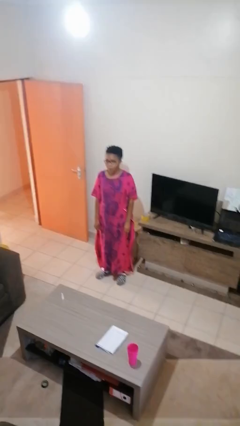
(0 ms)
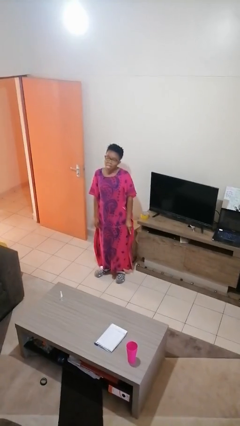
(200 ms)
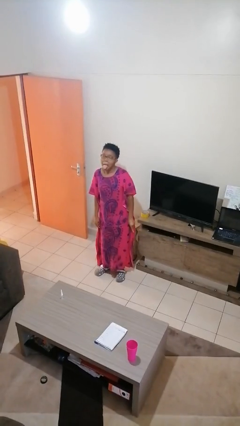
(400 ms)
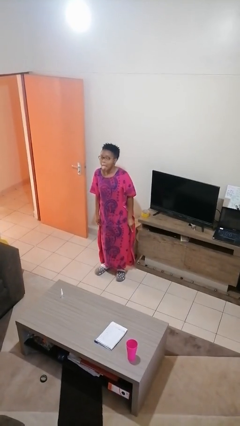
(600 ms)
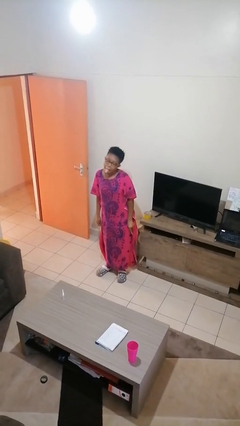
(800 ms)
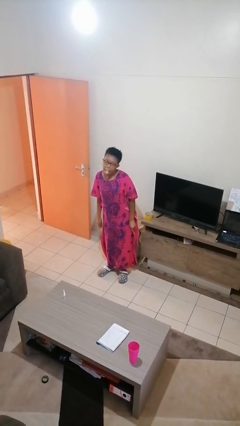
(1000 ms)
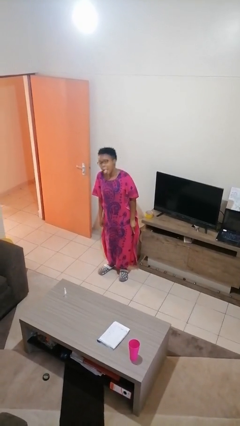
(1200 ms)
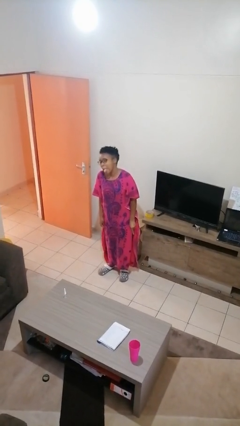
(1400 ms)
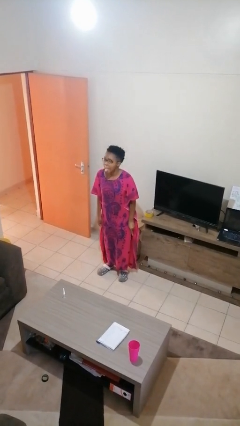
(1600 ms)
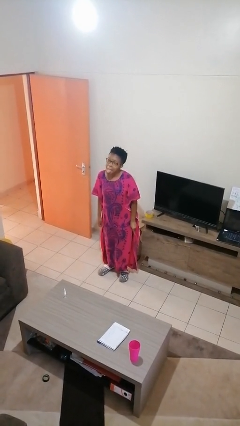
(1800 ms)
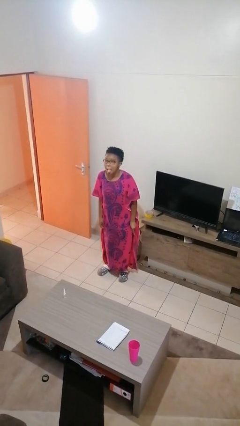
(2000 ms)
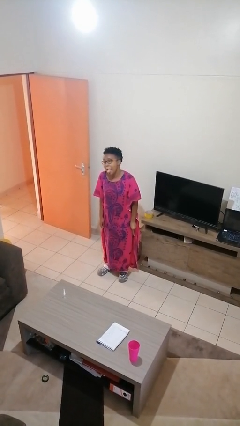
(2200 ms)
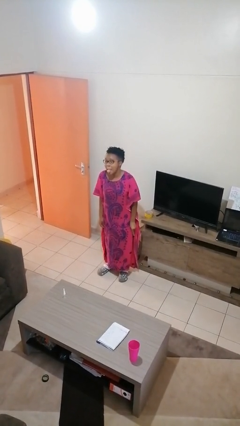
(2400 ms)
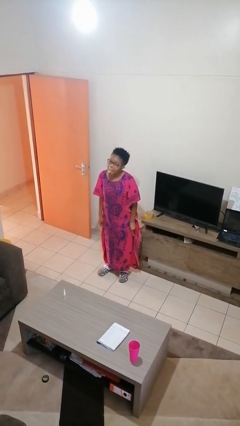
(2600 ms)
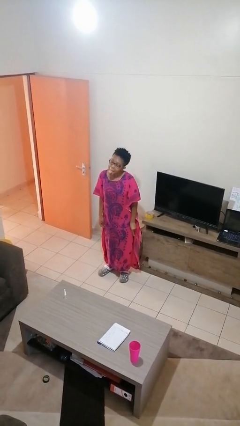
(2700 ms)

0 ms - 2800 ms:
person sticks out tongue

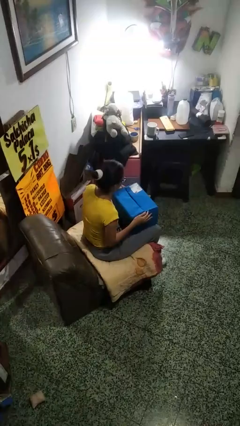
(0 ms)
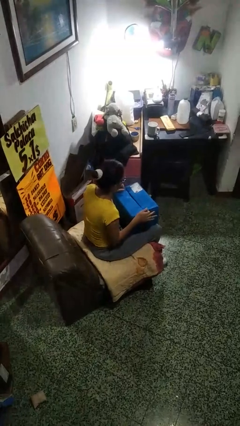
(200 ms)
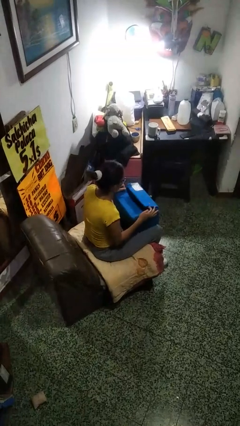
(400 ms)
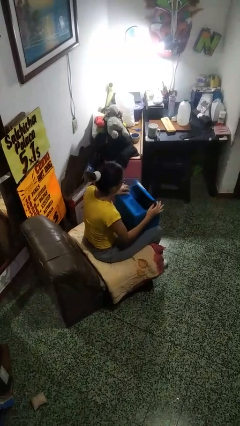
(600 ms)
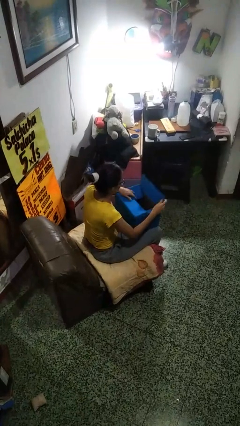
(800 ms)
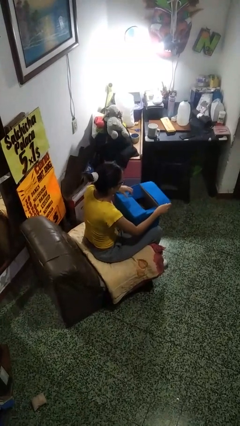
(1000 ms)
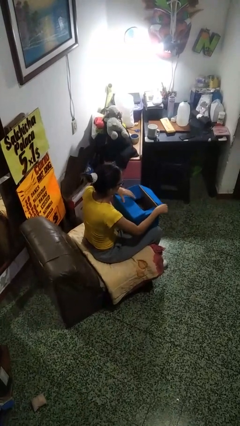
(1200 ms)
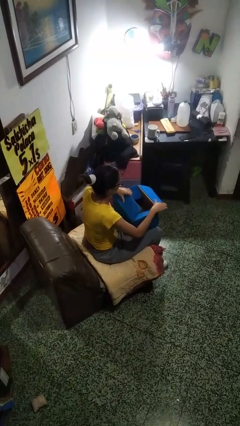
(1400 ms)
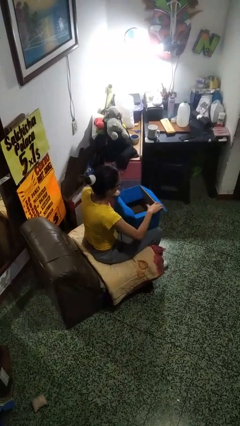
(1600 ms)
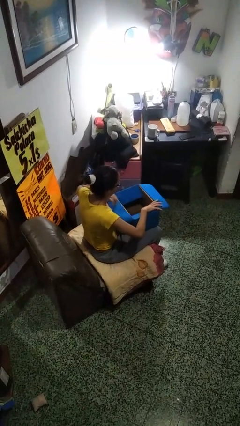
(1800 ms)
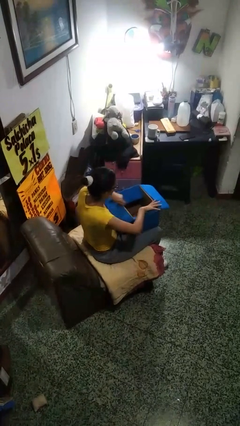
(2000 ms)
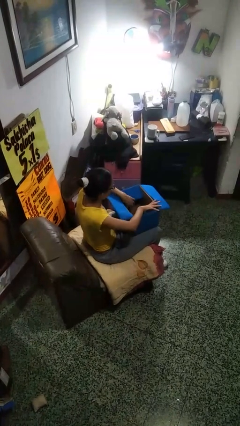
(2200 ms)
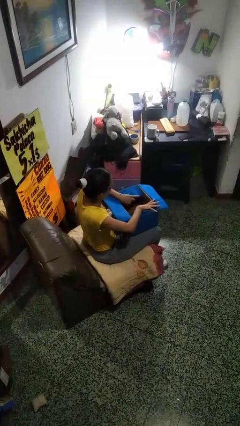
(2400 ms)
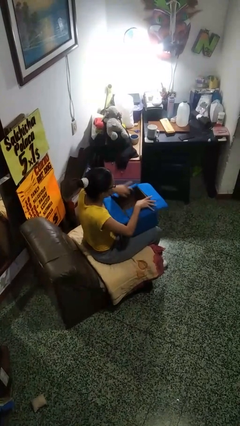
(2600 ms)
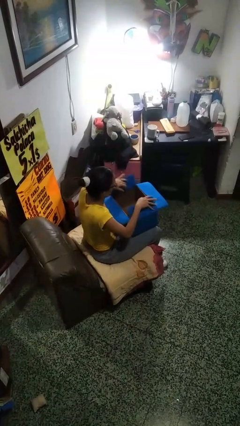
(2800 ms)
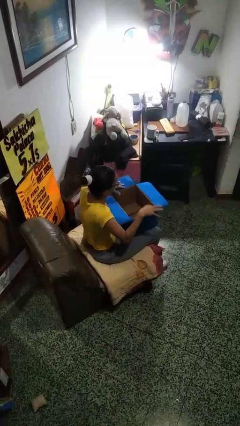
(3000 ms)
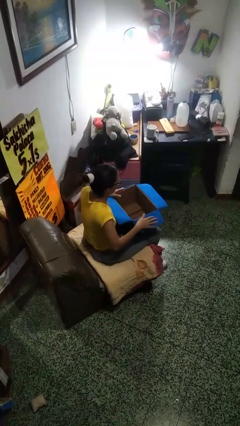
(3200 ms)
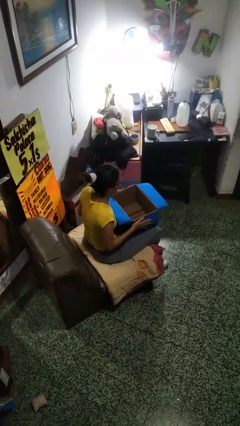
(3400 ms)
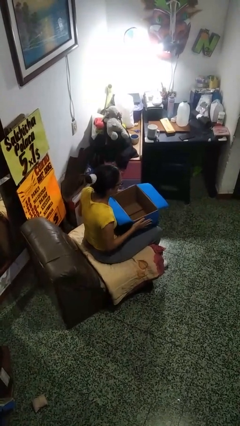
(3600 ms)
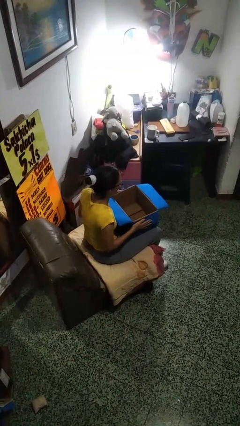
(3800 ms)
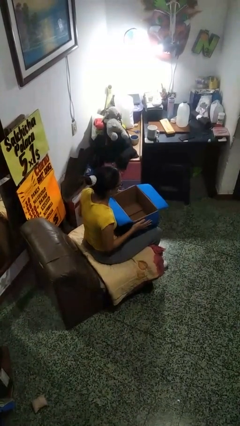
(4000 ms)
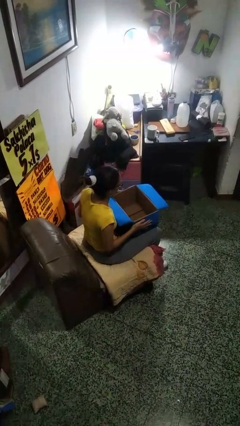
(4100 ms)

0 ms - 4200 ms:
person opens box

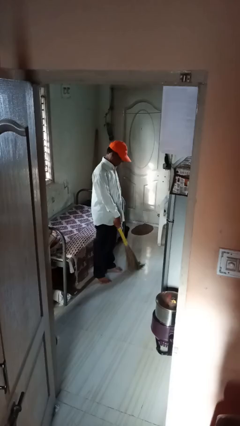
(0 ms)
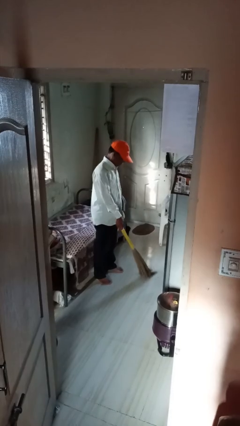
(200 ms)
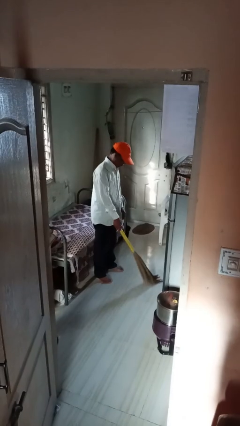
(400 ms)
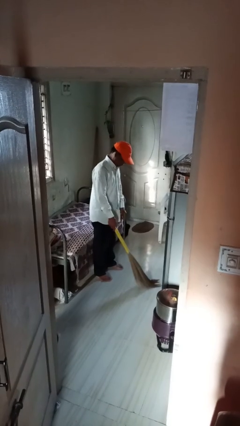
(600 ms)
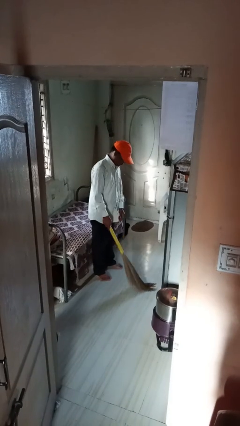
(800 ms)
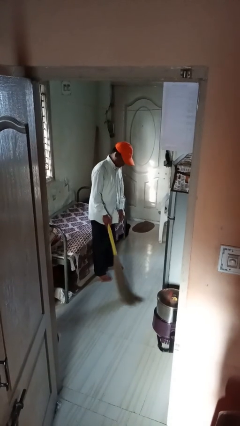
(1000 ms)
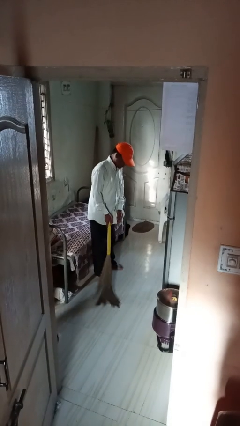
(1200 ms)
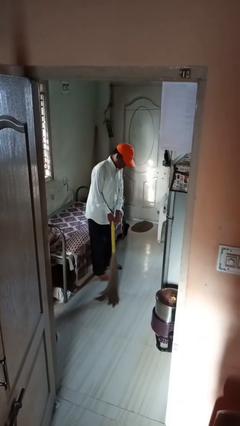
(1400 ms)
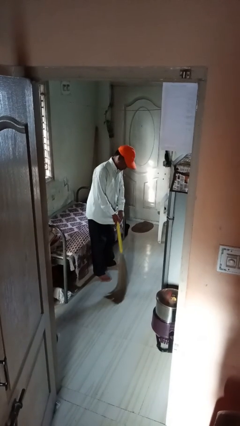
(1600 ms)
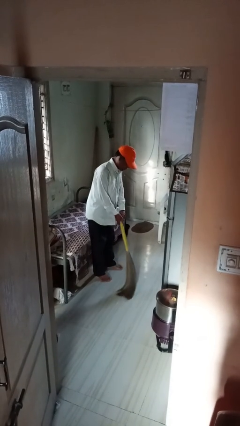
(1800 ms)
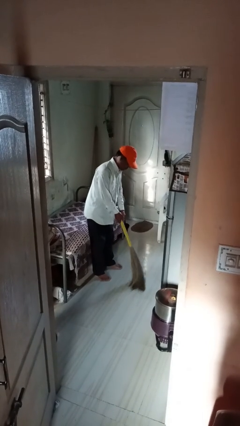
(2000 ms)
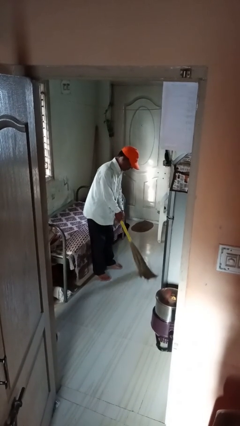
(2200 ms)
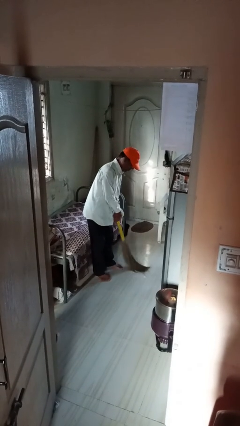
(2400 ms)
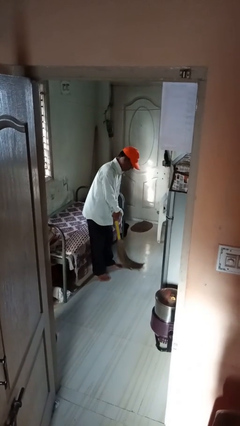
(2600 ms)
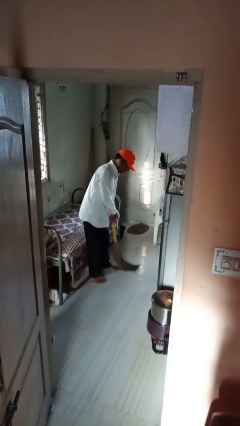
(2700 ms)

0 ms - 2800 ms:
person sweeps floor

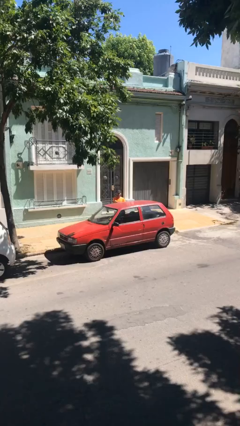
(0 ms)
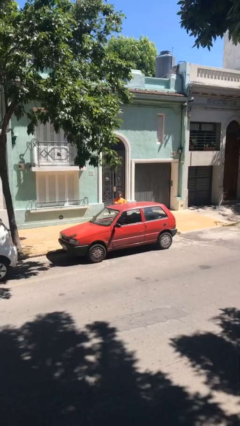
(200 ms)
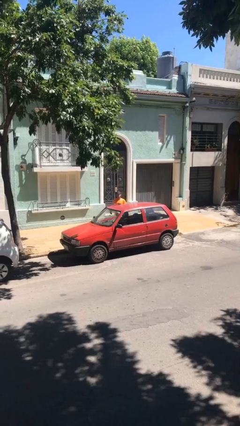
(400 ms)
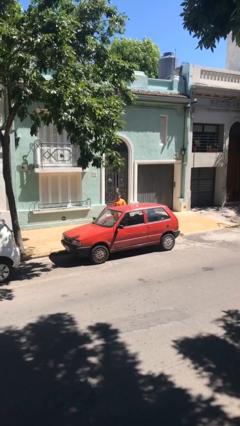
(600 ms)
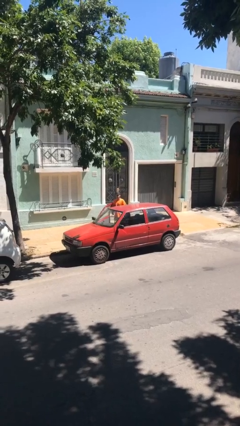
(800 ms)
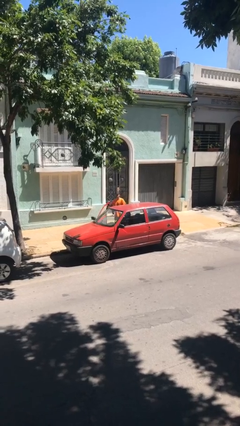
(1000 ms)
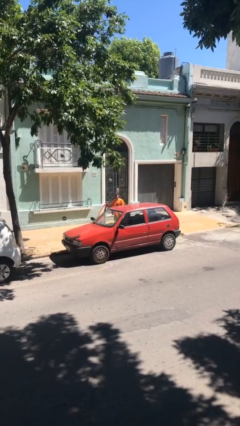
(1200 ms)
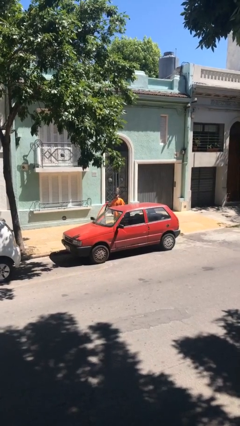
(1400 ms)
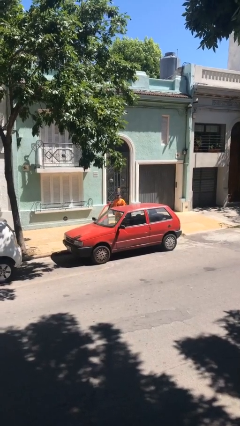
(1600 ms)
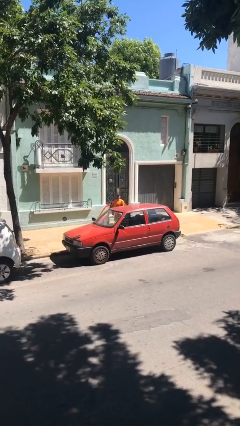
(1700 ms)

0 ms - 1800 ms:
person opens car door

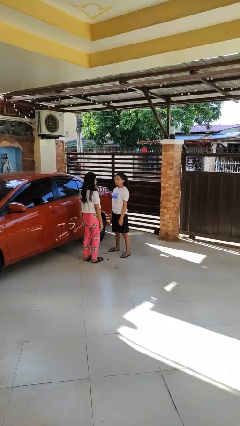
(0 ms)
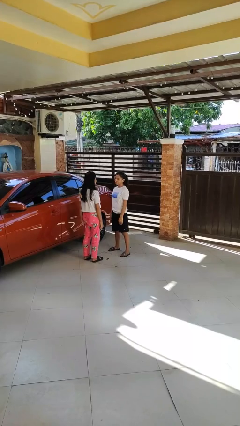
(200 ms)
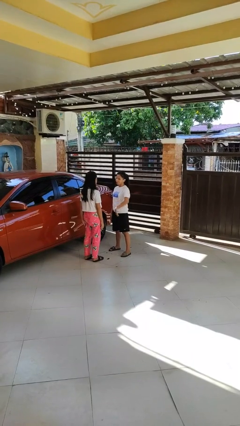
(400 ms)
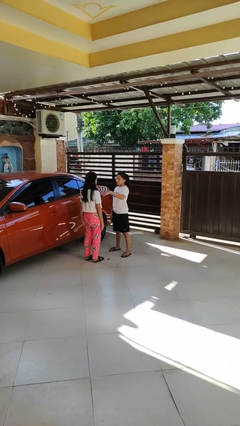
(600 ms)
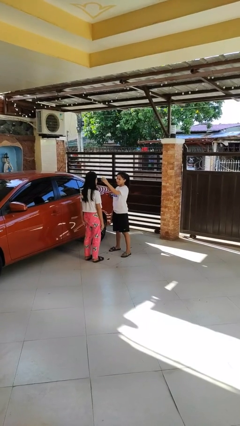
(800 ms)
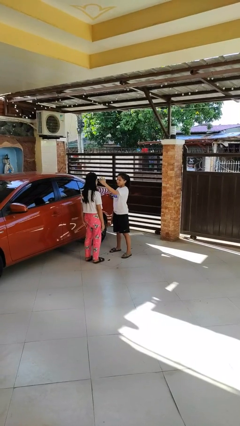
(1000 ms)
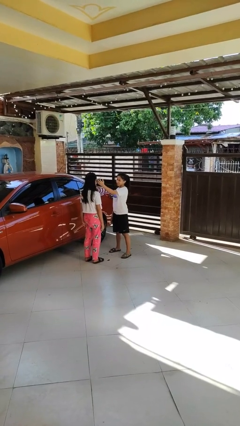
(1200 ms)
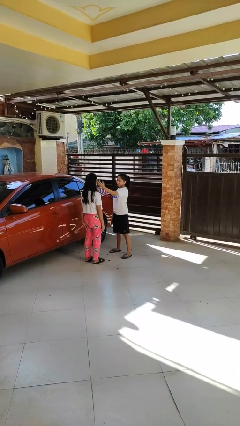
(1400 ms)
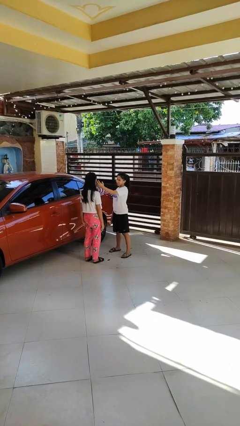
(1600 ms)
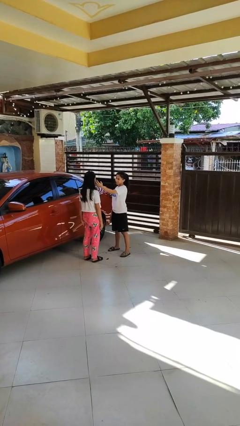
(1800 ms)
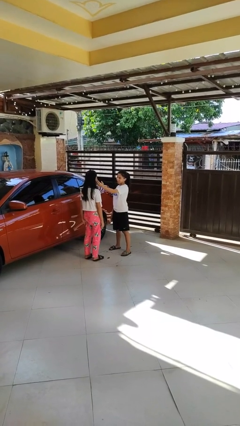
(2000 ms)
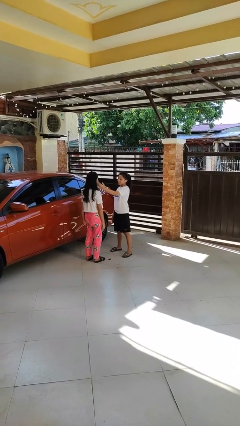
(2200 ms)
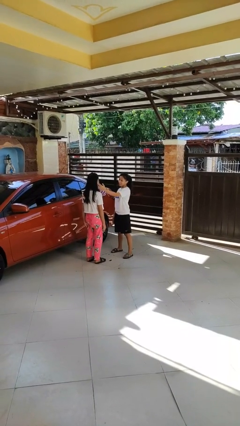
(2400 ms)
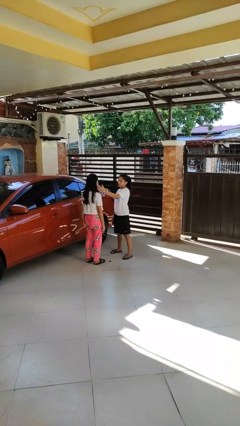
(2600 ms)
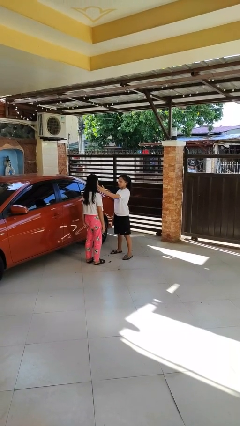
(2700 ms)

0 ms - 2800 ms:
person touches face of person

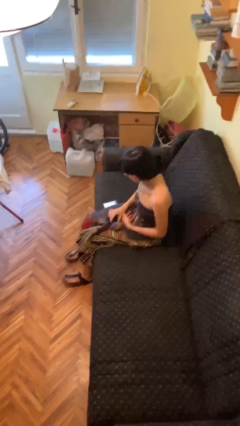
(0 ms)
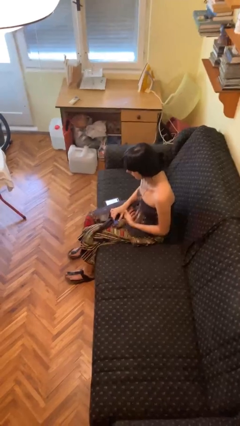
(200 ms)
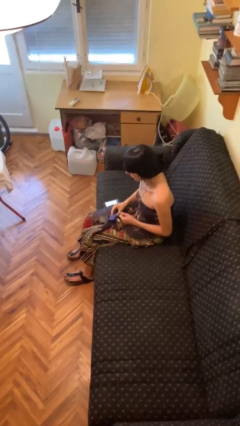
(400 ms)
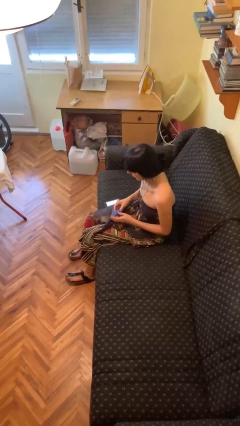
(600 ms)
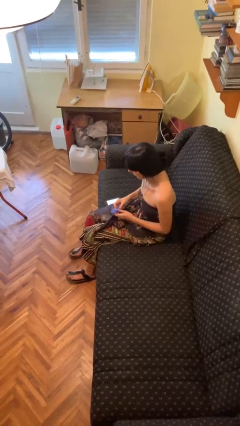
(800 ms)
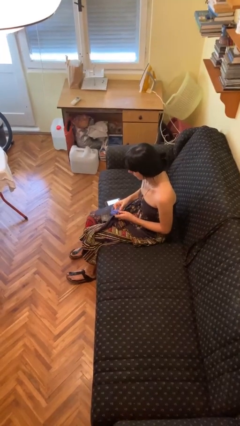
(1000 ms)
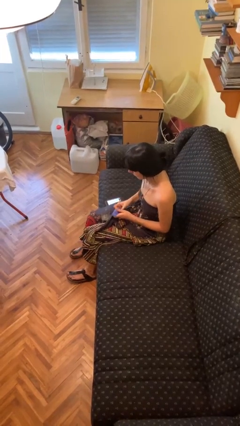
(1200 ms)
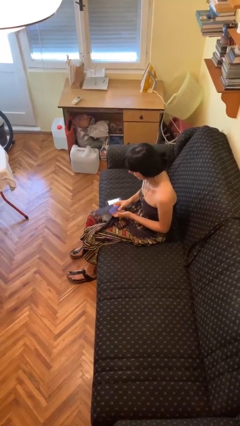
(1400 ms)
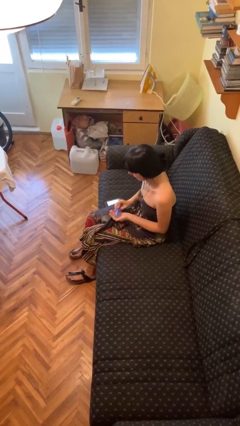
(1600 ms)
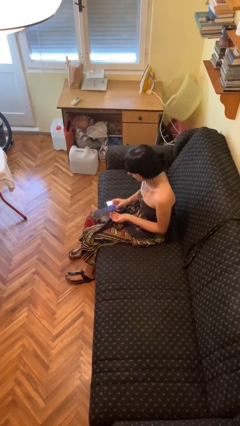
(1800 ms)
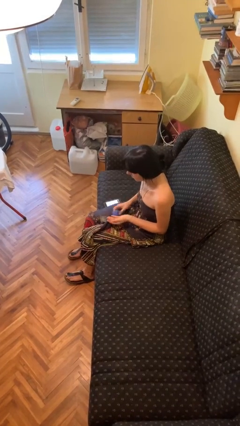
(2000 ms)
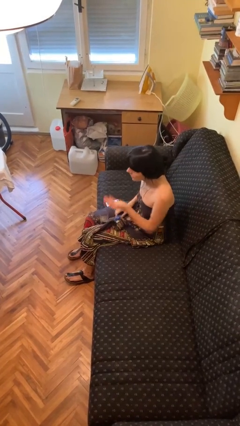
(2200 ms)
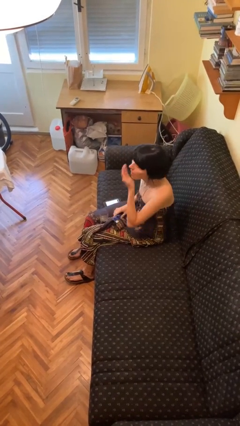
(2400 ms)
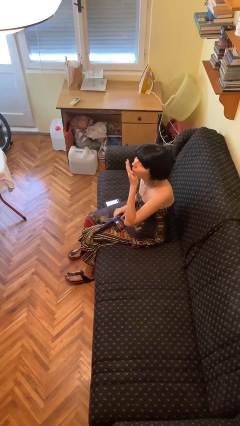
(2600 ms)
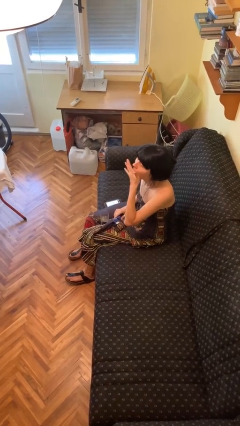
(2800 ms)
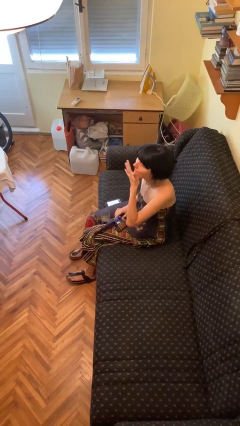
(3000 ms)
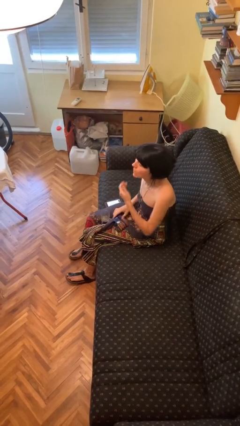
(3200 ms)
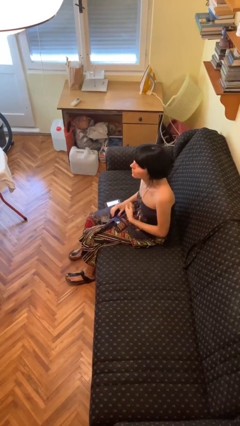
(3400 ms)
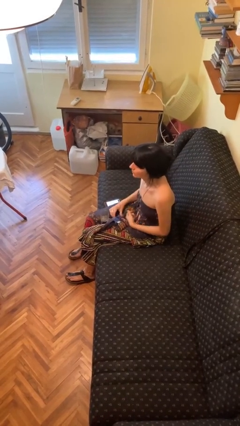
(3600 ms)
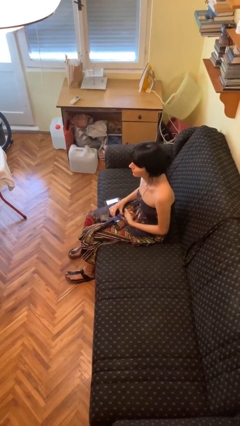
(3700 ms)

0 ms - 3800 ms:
person takes medicine pills
